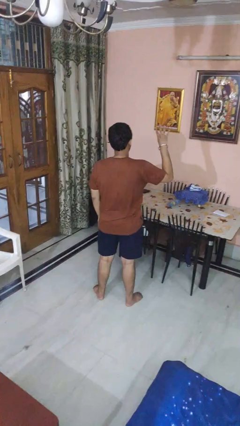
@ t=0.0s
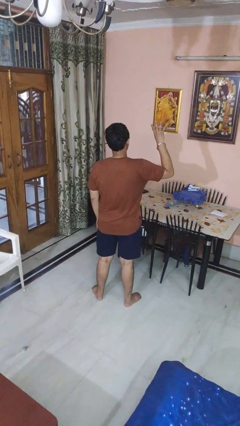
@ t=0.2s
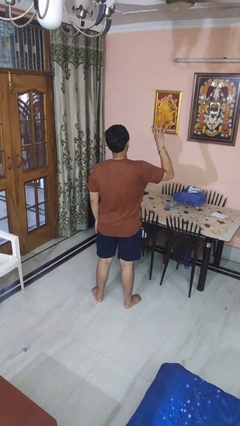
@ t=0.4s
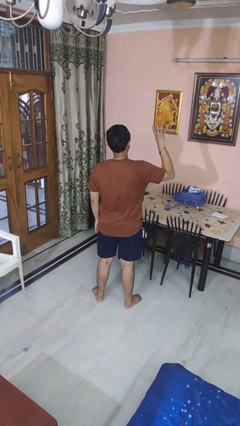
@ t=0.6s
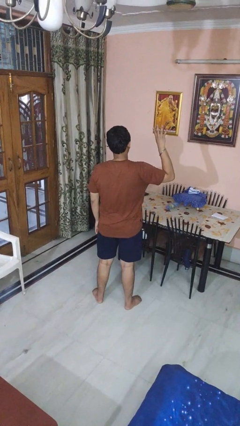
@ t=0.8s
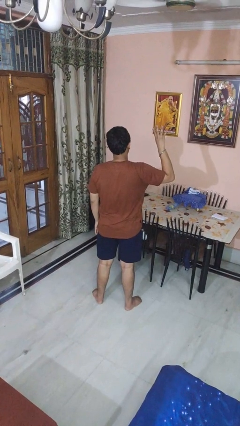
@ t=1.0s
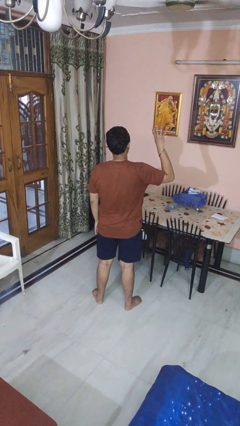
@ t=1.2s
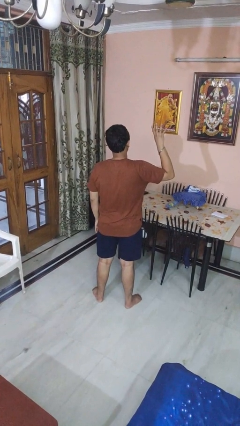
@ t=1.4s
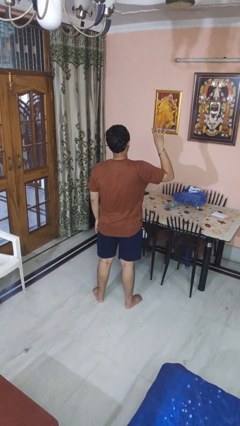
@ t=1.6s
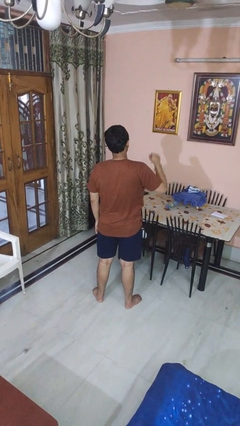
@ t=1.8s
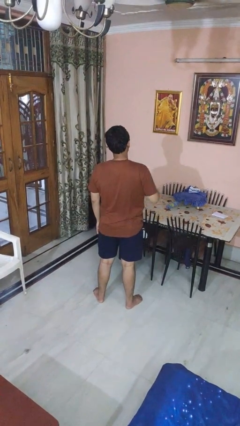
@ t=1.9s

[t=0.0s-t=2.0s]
person gestures number four

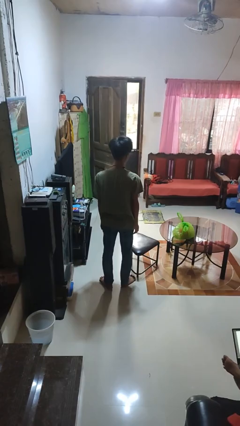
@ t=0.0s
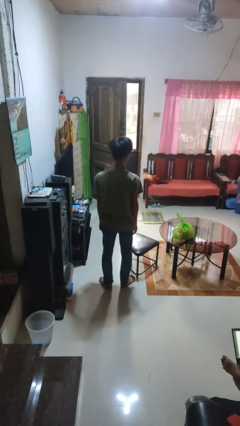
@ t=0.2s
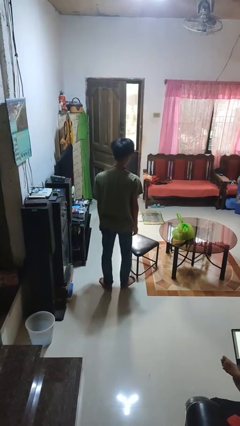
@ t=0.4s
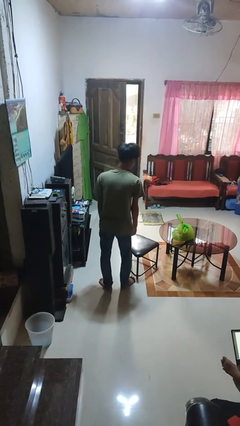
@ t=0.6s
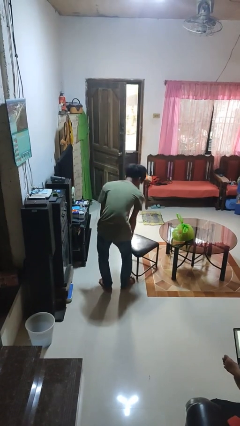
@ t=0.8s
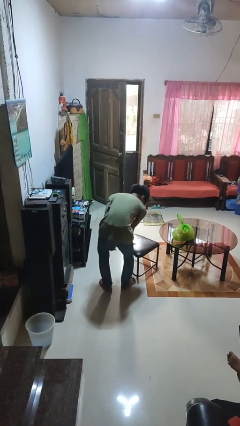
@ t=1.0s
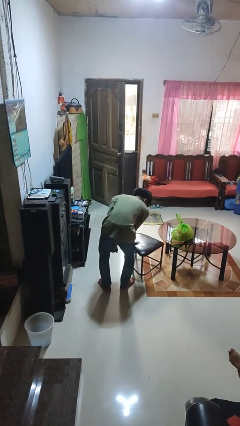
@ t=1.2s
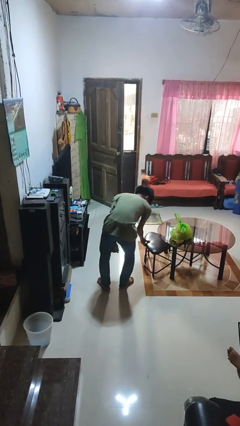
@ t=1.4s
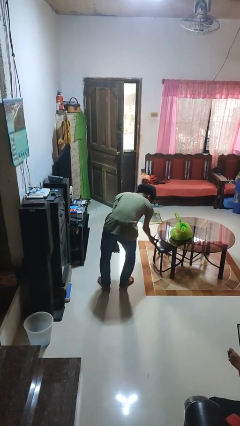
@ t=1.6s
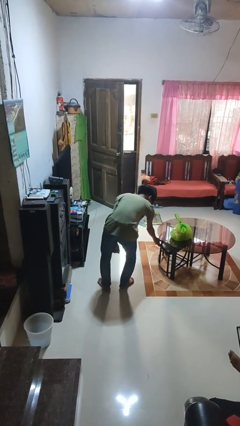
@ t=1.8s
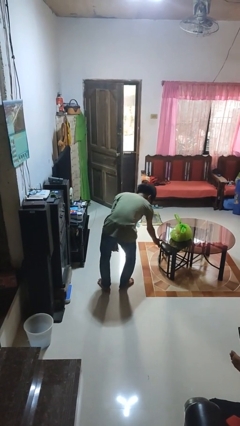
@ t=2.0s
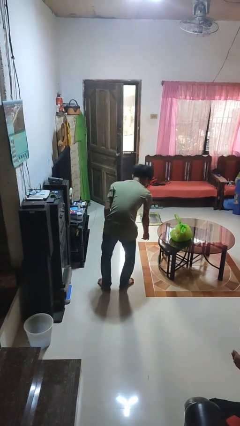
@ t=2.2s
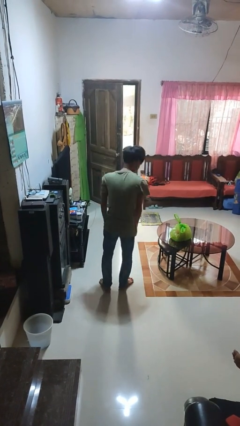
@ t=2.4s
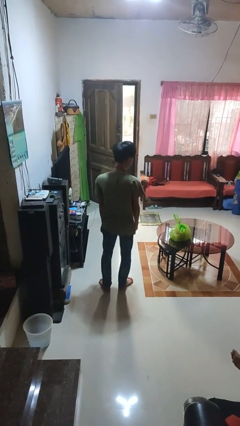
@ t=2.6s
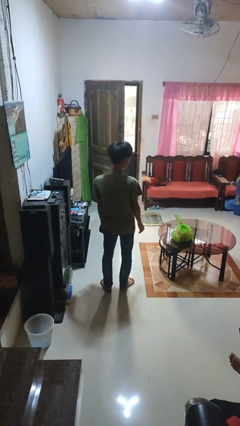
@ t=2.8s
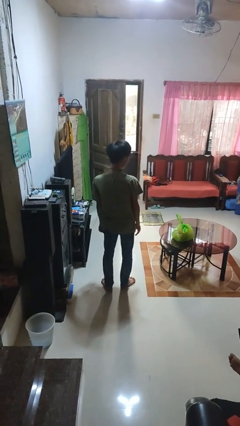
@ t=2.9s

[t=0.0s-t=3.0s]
person pushes in chair

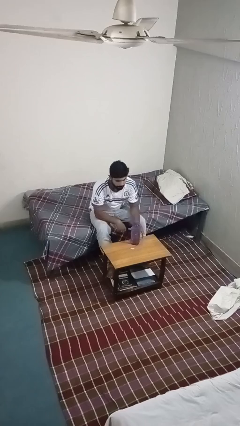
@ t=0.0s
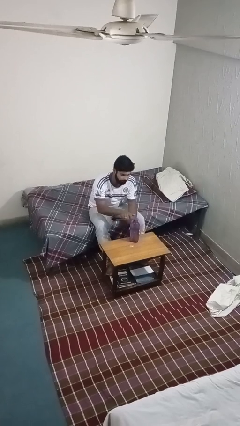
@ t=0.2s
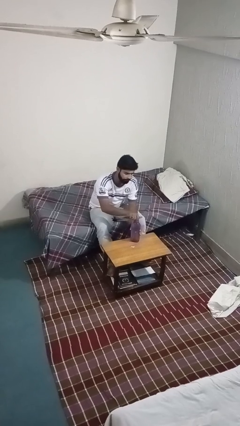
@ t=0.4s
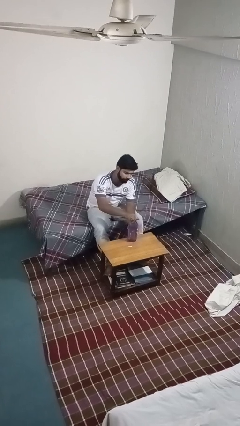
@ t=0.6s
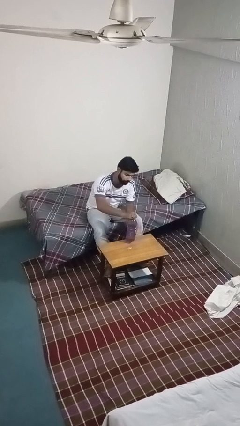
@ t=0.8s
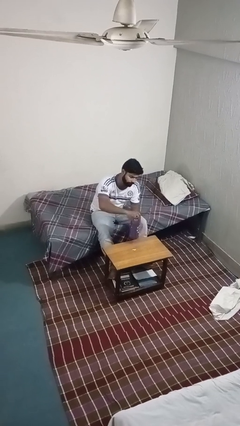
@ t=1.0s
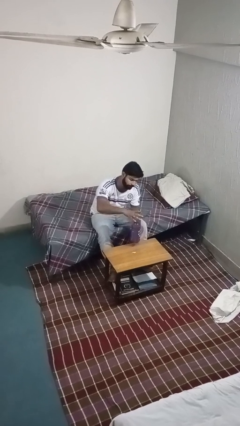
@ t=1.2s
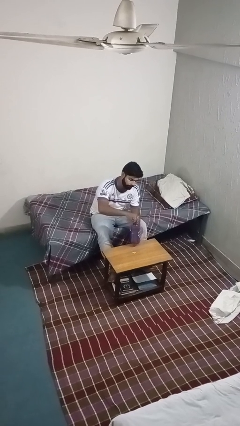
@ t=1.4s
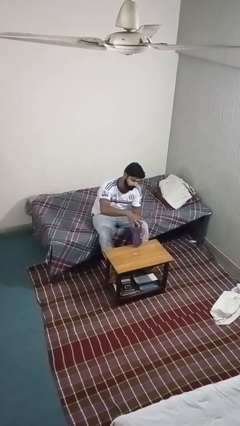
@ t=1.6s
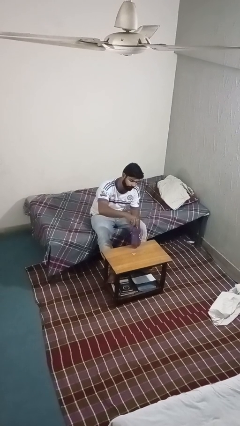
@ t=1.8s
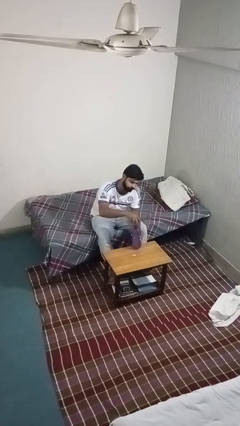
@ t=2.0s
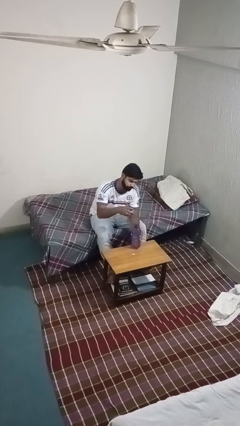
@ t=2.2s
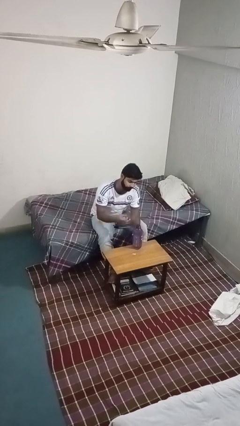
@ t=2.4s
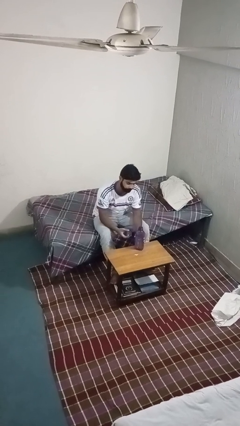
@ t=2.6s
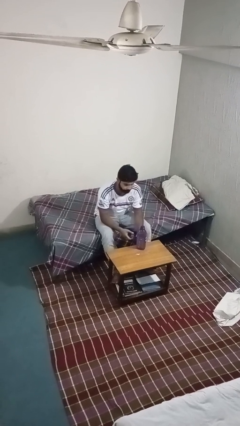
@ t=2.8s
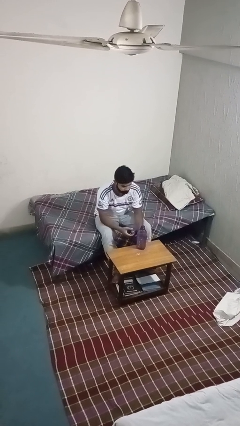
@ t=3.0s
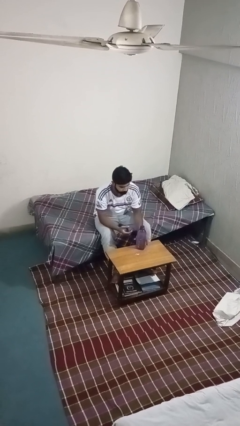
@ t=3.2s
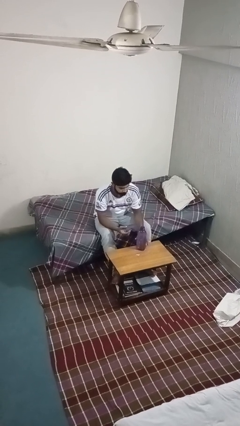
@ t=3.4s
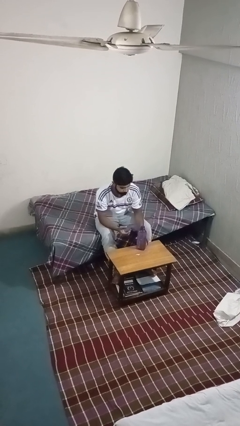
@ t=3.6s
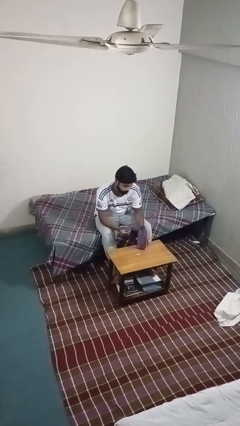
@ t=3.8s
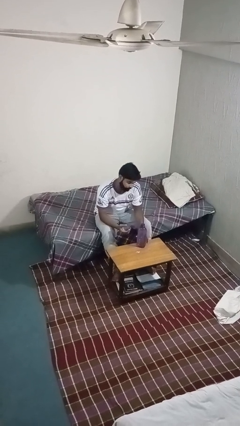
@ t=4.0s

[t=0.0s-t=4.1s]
person unscrews lid from bottle

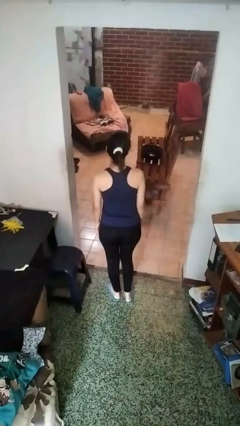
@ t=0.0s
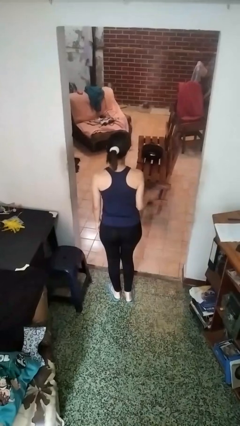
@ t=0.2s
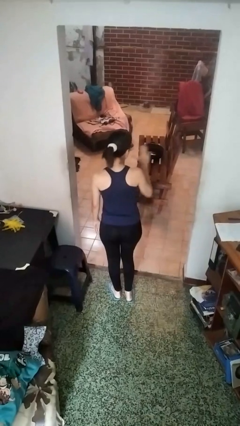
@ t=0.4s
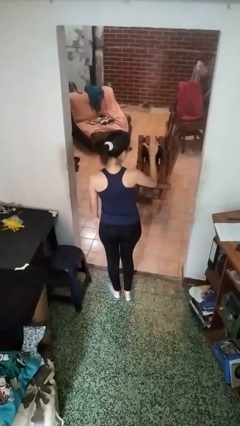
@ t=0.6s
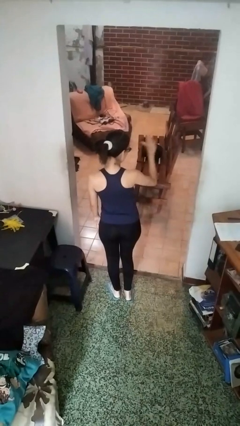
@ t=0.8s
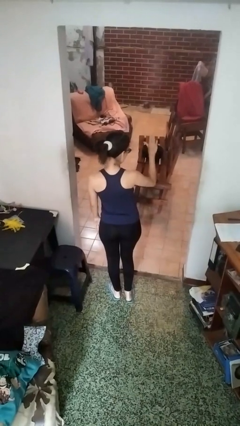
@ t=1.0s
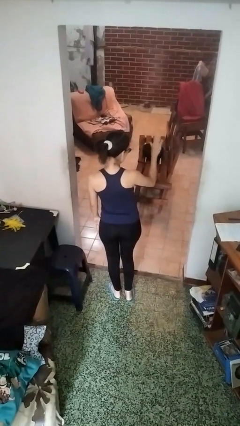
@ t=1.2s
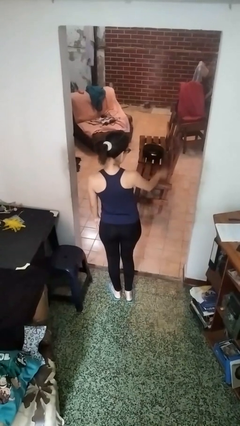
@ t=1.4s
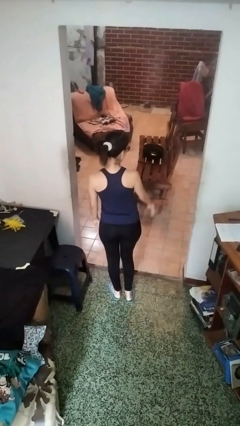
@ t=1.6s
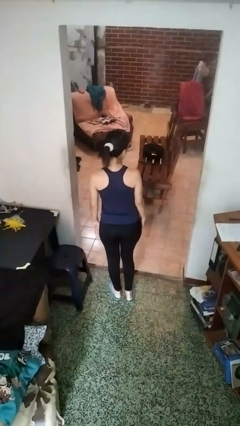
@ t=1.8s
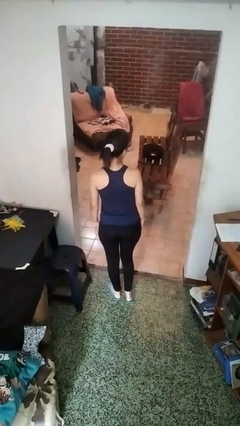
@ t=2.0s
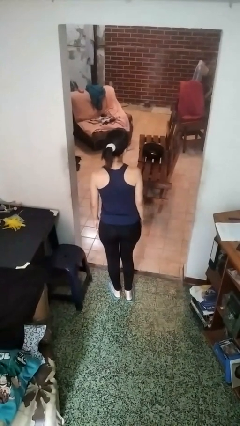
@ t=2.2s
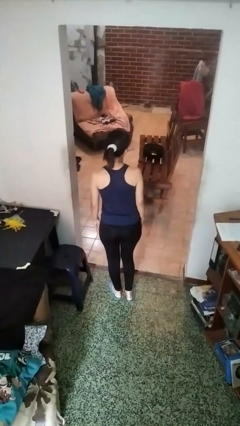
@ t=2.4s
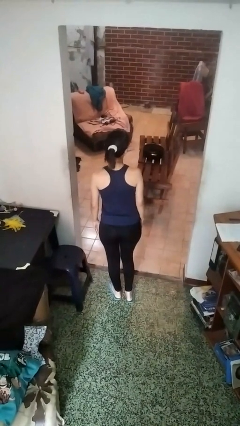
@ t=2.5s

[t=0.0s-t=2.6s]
person gestures stop

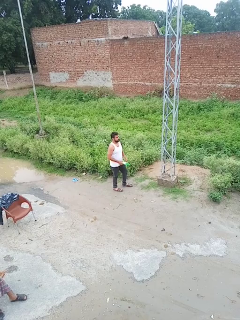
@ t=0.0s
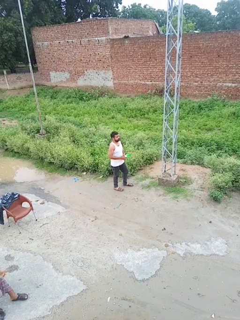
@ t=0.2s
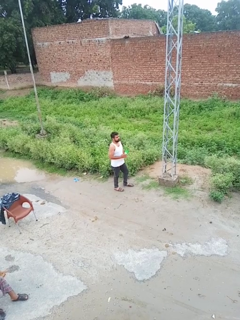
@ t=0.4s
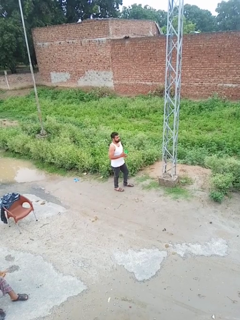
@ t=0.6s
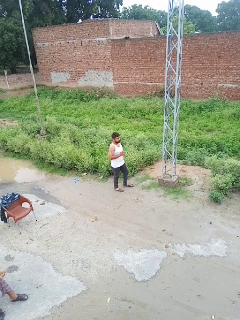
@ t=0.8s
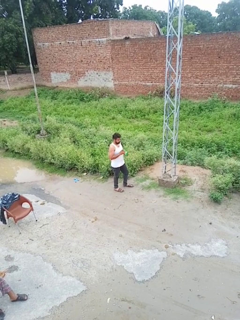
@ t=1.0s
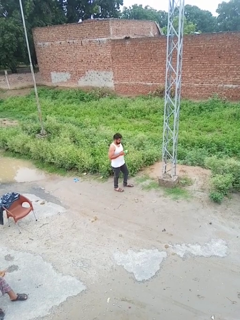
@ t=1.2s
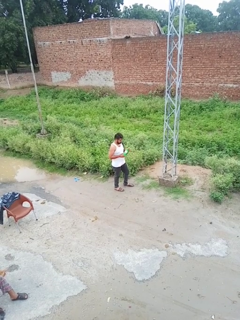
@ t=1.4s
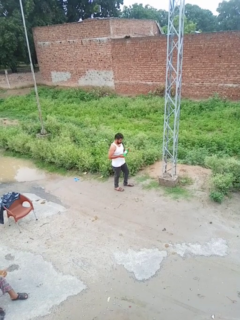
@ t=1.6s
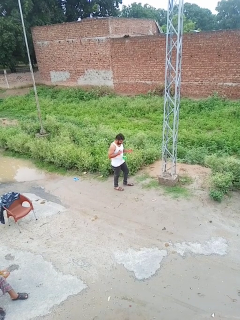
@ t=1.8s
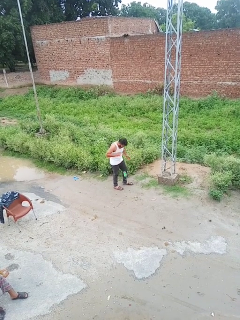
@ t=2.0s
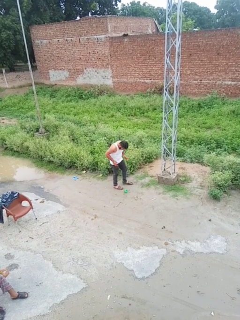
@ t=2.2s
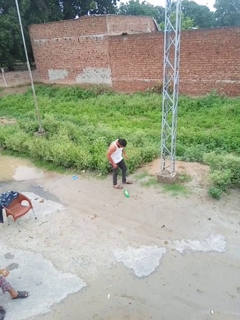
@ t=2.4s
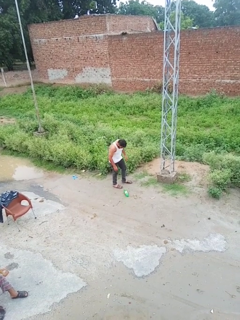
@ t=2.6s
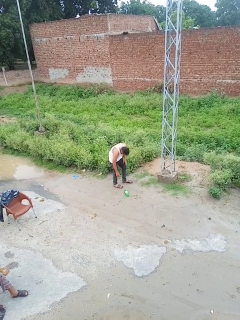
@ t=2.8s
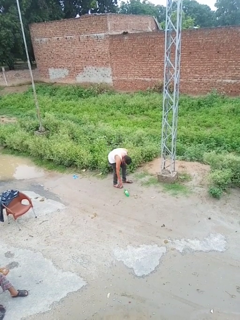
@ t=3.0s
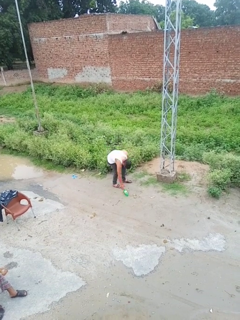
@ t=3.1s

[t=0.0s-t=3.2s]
person drops object

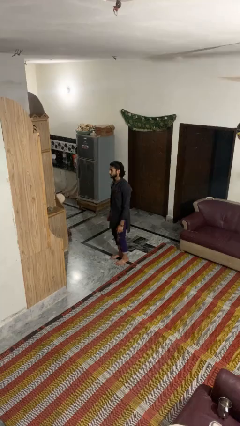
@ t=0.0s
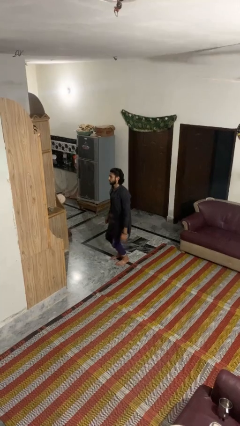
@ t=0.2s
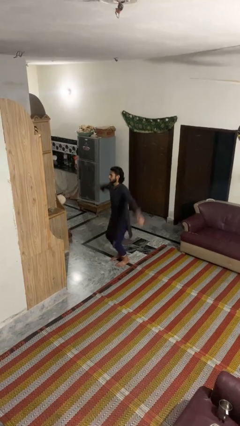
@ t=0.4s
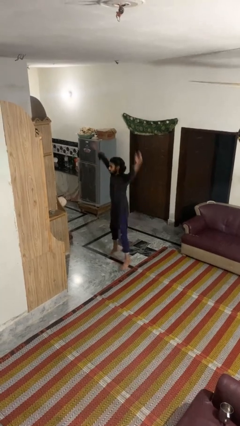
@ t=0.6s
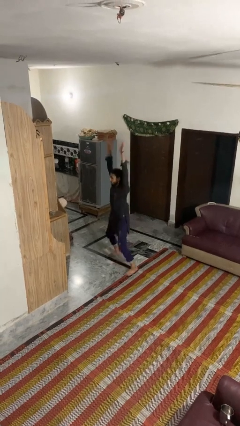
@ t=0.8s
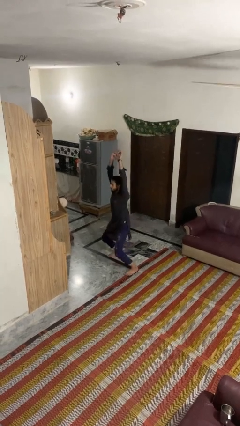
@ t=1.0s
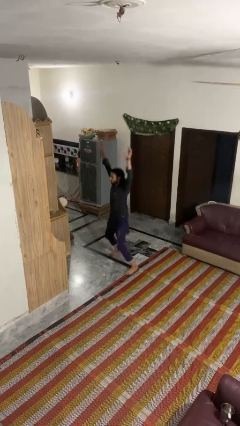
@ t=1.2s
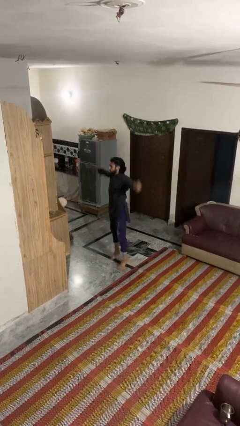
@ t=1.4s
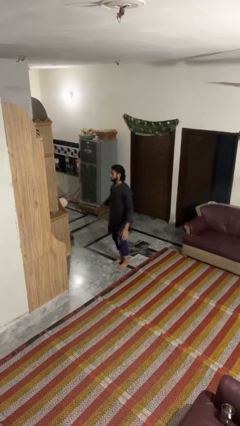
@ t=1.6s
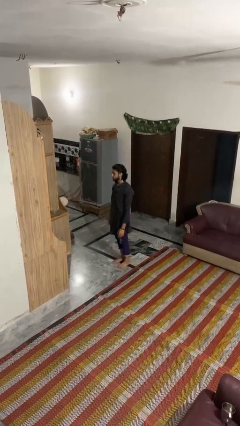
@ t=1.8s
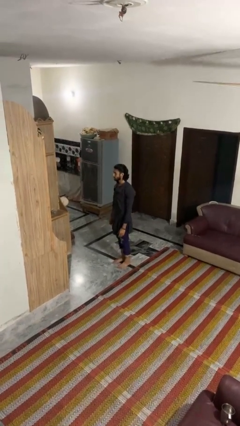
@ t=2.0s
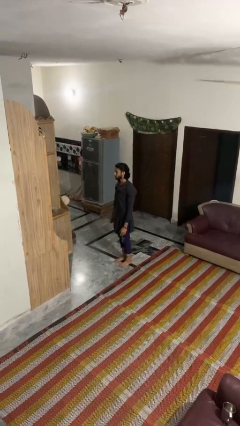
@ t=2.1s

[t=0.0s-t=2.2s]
person exercises with jumping jacks

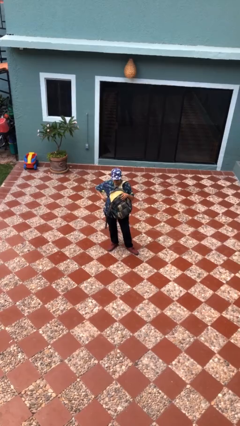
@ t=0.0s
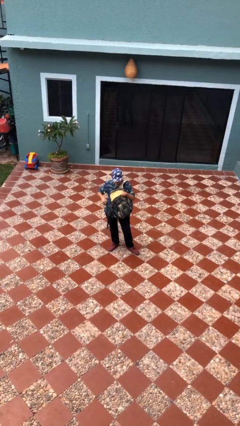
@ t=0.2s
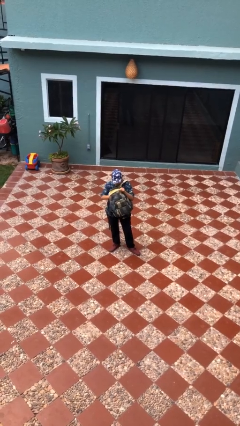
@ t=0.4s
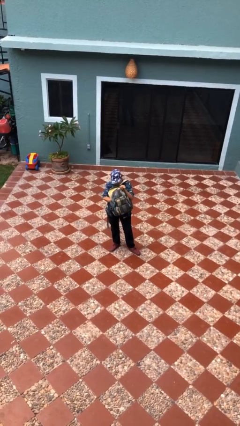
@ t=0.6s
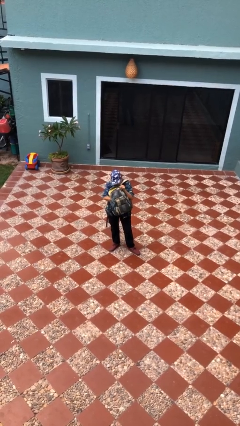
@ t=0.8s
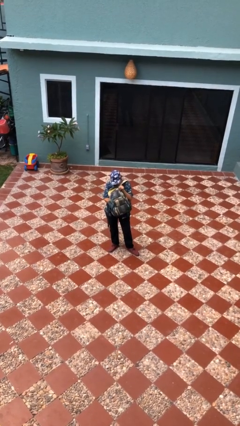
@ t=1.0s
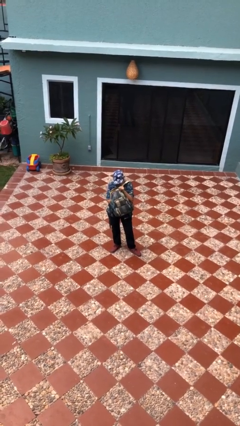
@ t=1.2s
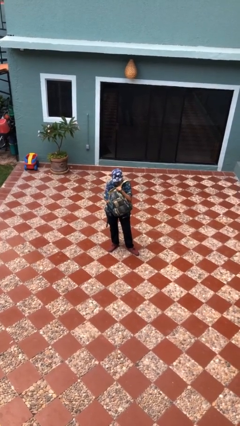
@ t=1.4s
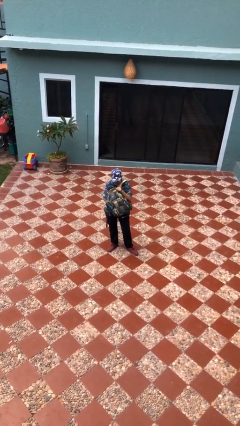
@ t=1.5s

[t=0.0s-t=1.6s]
person searches in backpack
